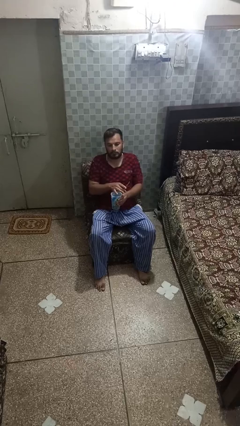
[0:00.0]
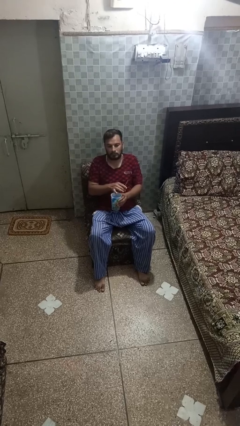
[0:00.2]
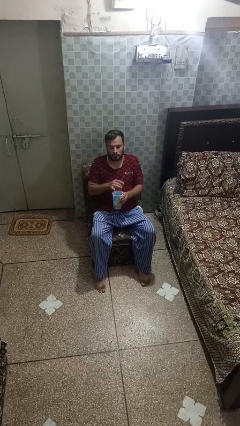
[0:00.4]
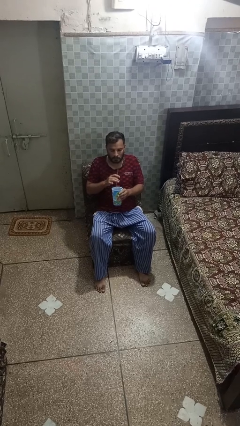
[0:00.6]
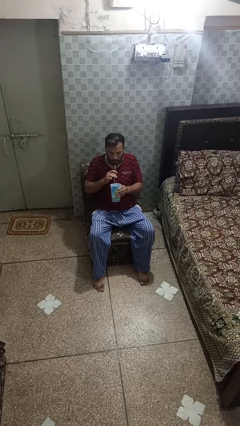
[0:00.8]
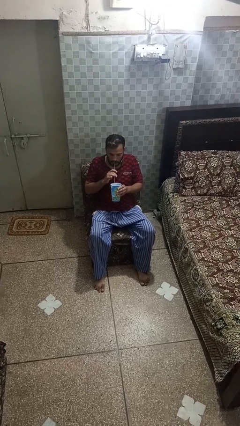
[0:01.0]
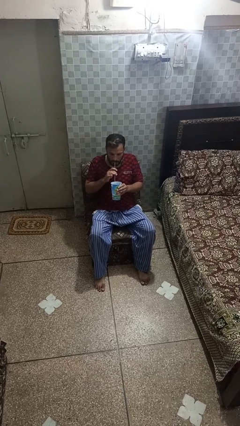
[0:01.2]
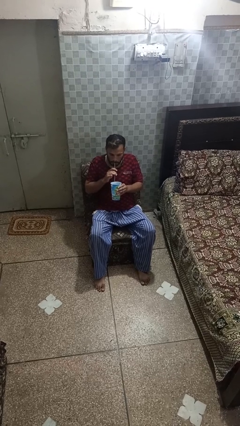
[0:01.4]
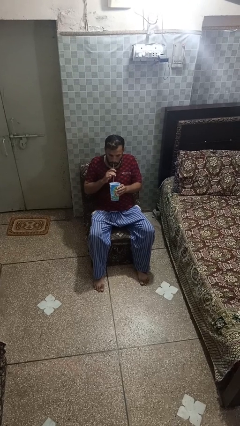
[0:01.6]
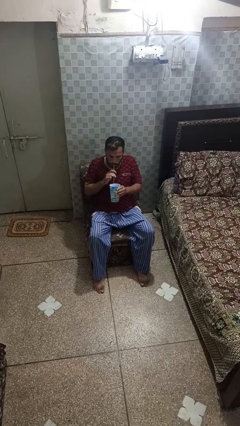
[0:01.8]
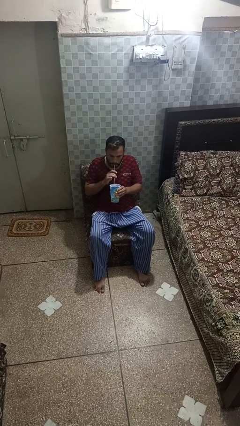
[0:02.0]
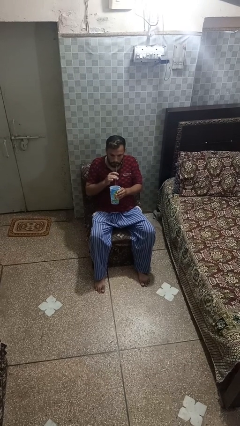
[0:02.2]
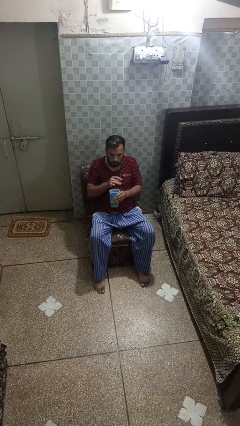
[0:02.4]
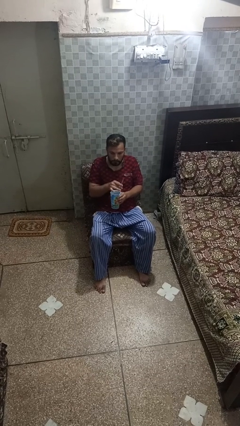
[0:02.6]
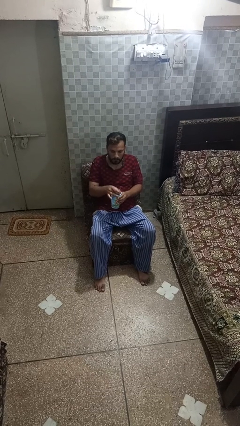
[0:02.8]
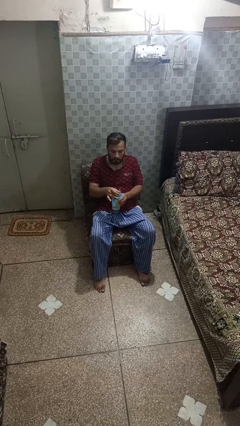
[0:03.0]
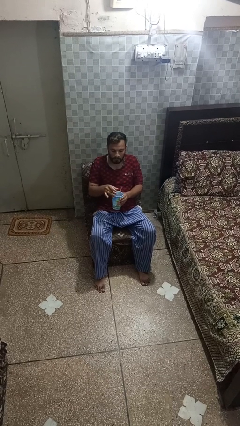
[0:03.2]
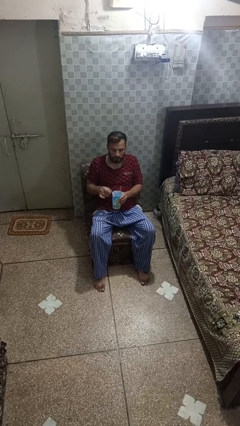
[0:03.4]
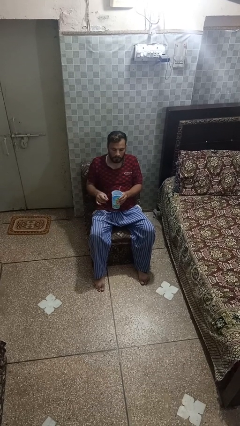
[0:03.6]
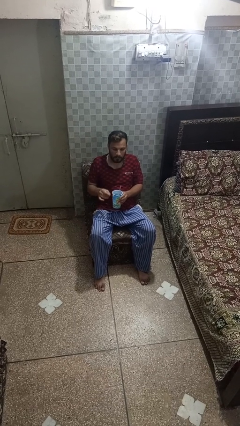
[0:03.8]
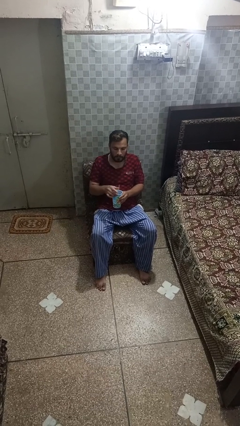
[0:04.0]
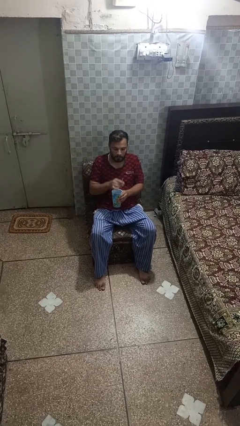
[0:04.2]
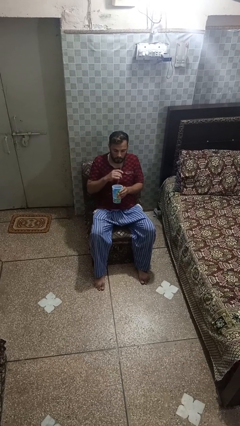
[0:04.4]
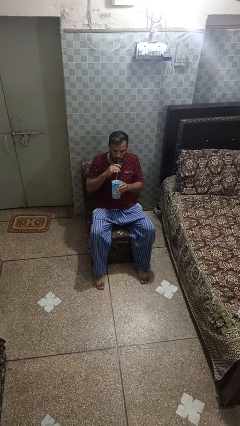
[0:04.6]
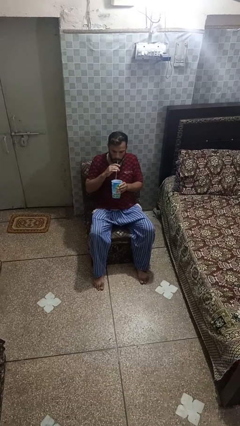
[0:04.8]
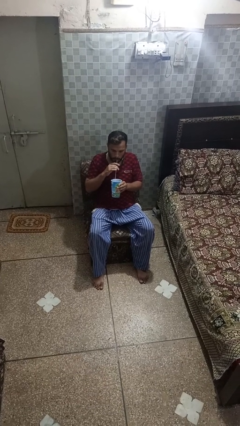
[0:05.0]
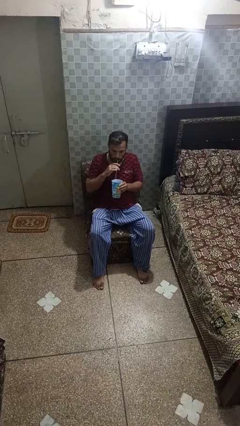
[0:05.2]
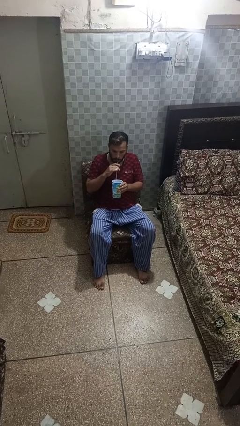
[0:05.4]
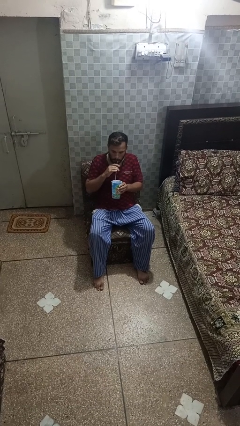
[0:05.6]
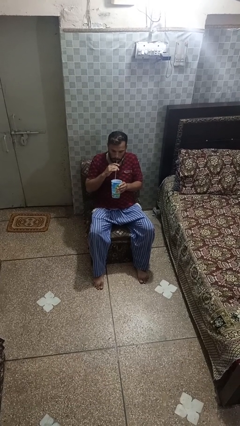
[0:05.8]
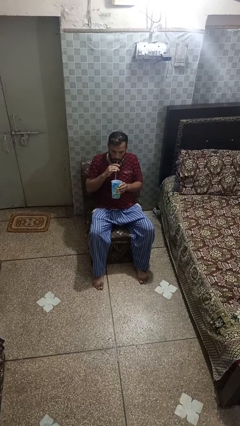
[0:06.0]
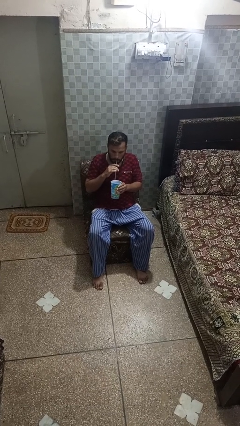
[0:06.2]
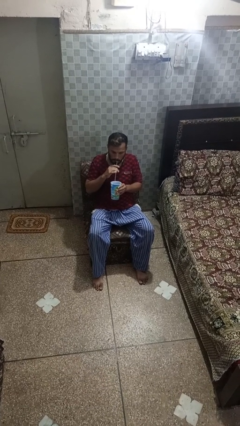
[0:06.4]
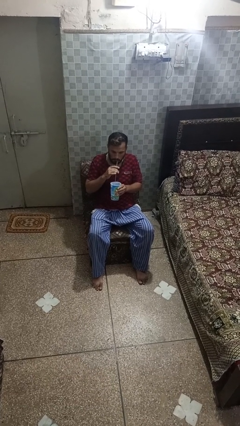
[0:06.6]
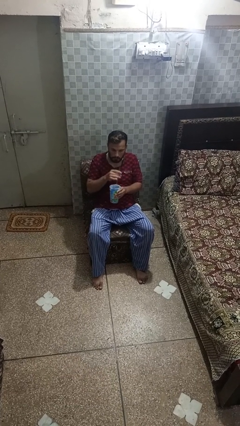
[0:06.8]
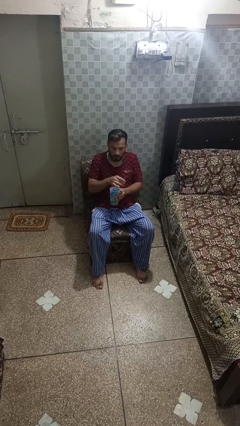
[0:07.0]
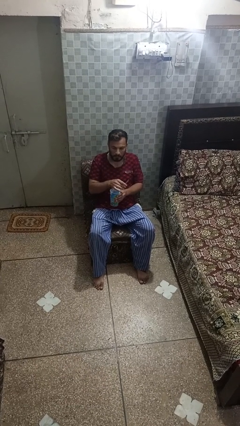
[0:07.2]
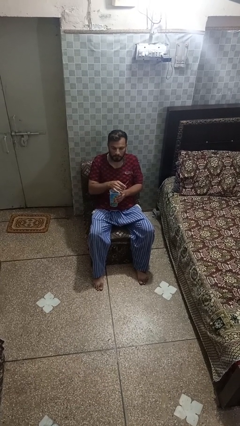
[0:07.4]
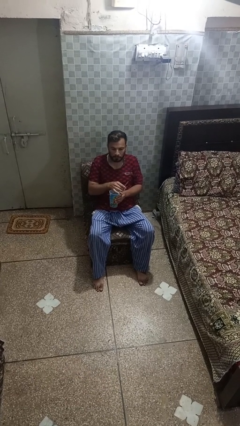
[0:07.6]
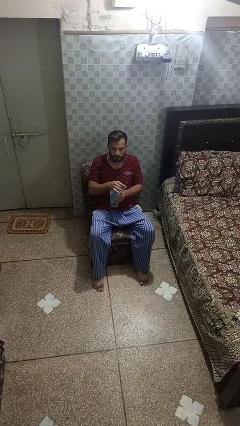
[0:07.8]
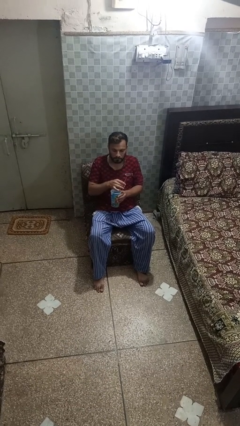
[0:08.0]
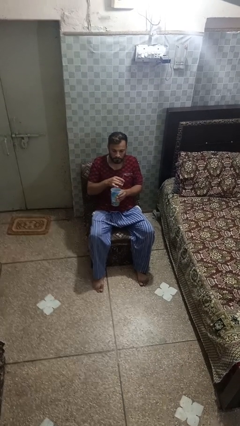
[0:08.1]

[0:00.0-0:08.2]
person drinks from straw

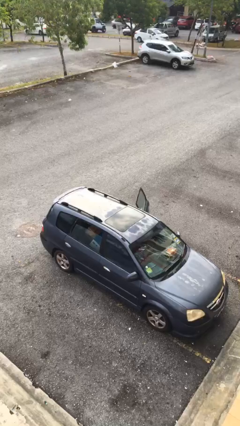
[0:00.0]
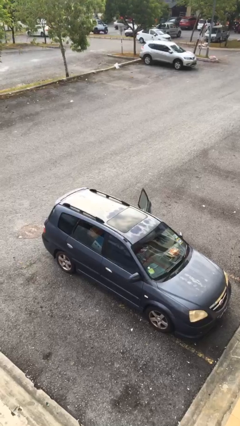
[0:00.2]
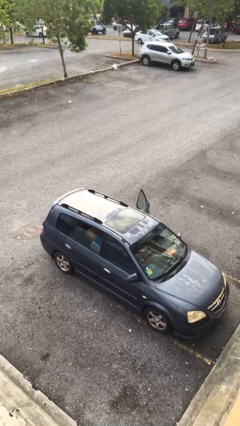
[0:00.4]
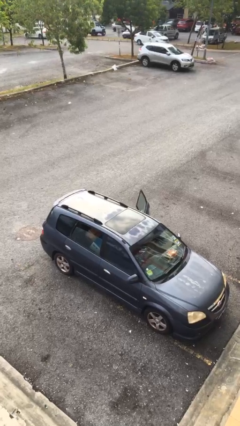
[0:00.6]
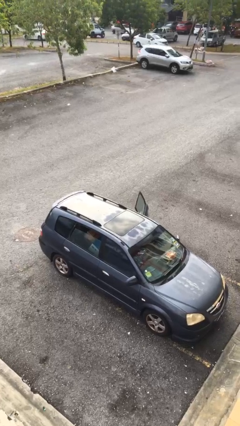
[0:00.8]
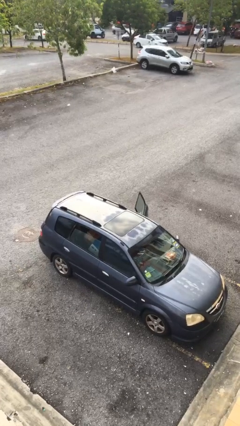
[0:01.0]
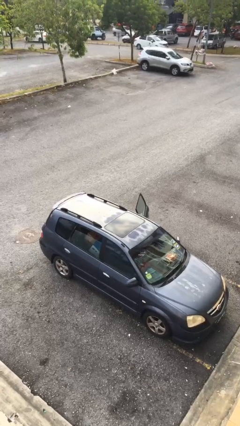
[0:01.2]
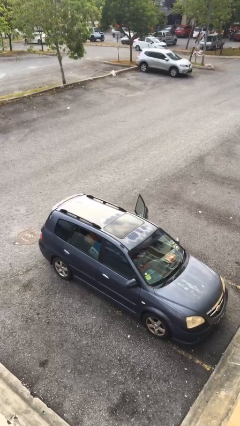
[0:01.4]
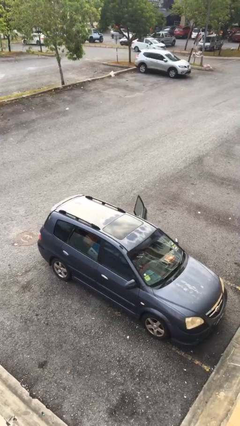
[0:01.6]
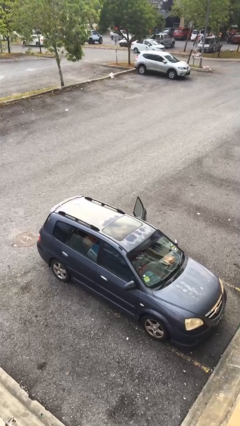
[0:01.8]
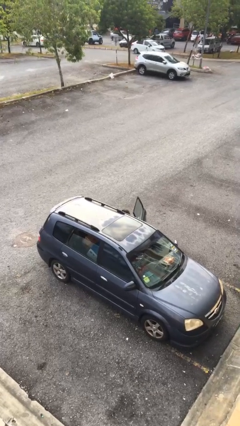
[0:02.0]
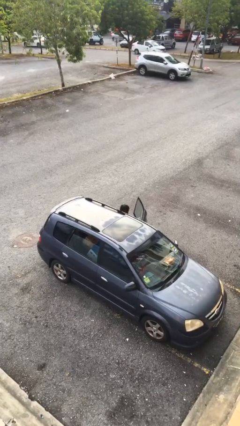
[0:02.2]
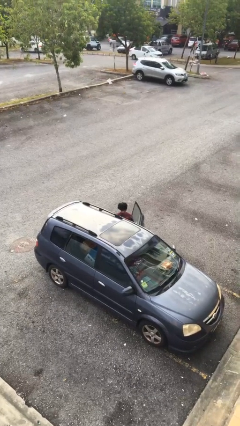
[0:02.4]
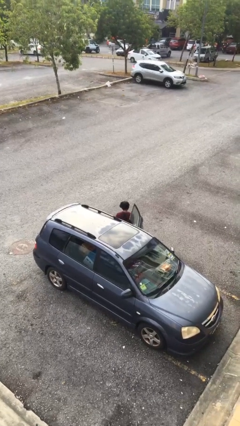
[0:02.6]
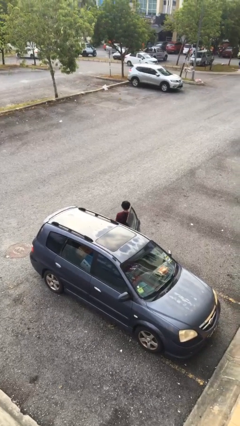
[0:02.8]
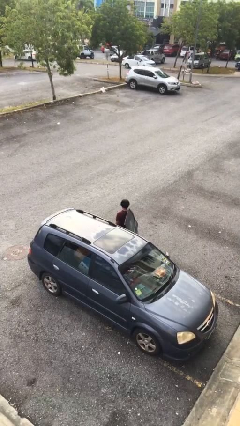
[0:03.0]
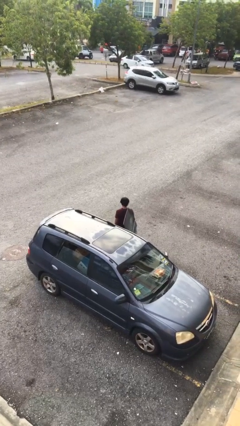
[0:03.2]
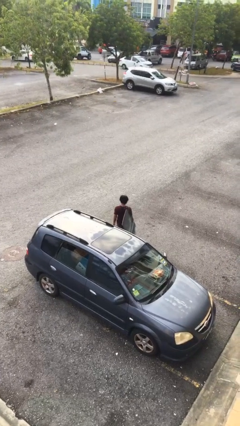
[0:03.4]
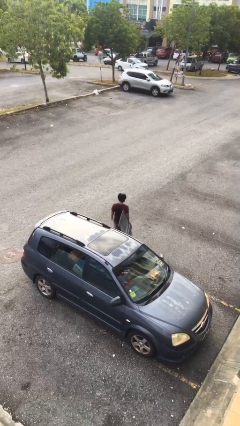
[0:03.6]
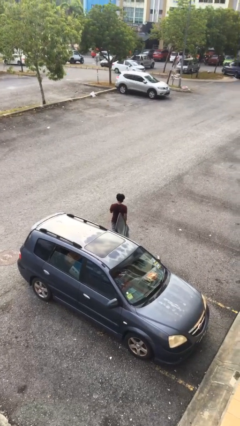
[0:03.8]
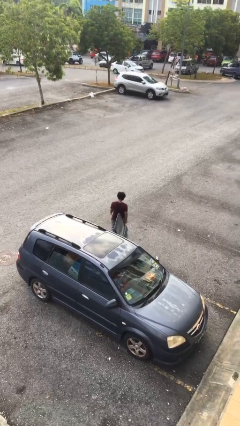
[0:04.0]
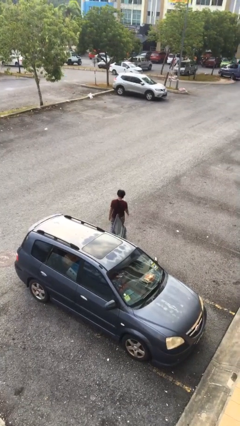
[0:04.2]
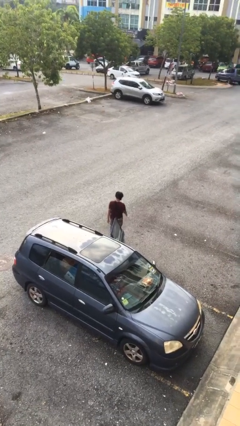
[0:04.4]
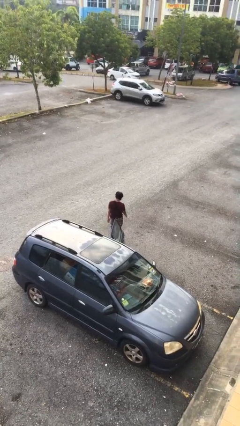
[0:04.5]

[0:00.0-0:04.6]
person exits car

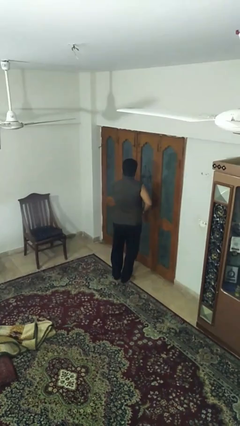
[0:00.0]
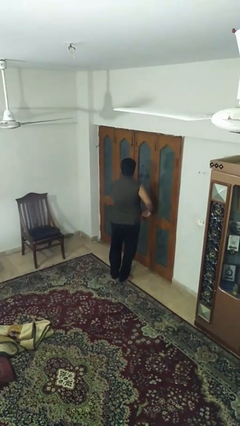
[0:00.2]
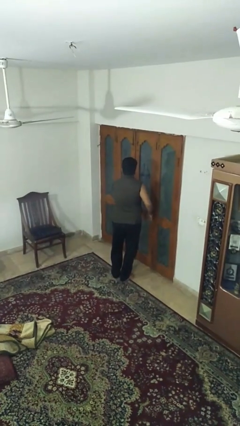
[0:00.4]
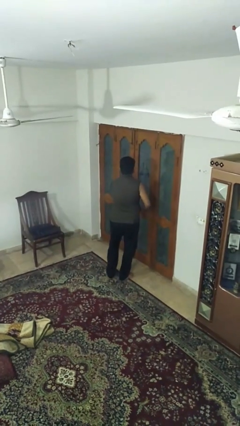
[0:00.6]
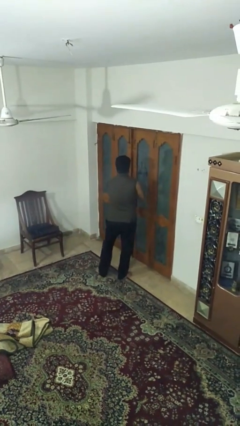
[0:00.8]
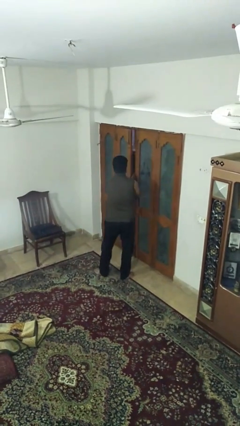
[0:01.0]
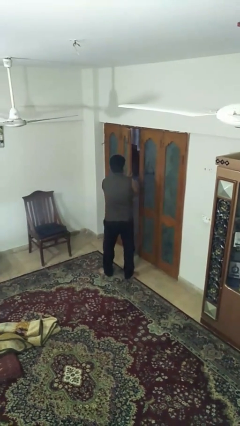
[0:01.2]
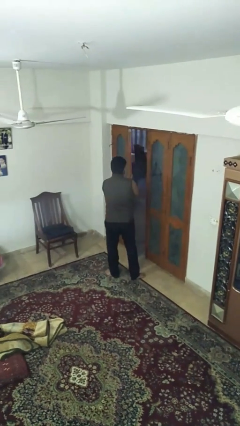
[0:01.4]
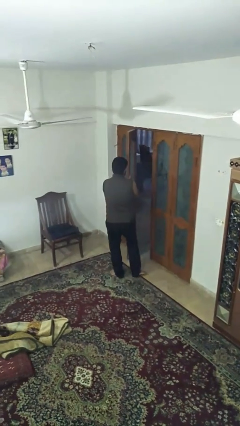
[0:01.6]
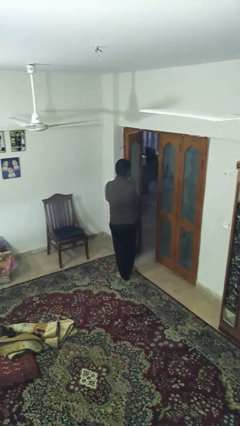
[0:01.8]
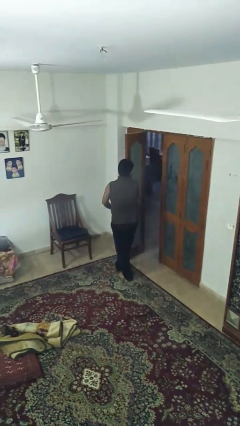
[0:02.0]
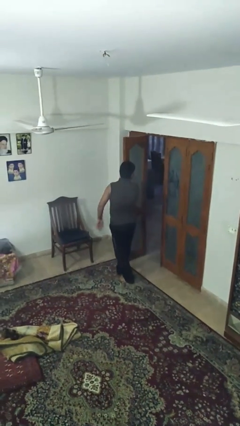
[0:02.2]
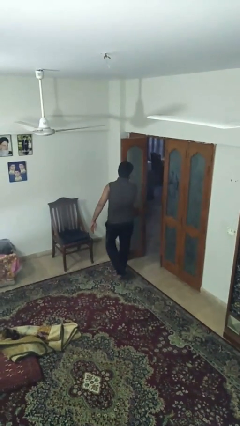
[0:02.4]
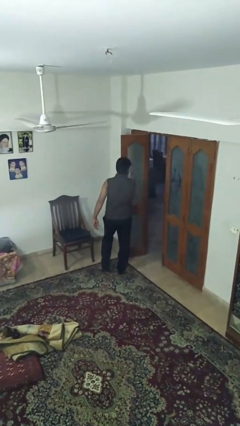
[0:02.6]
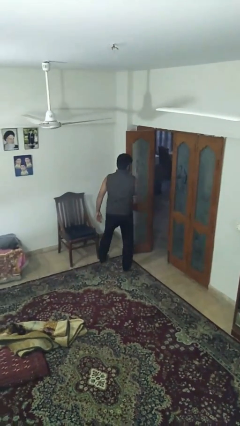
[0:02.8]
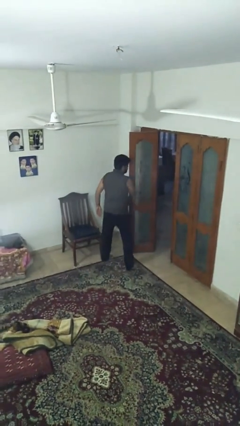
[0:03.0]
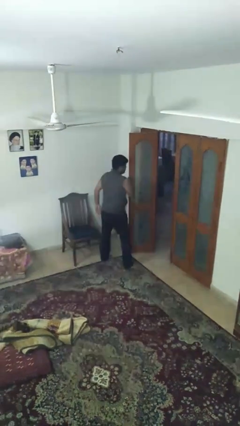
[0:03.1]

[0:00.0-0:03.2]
person opens facility door

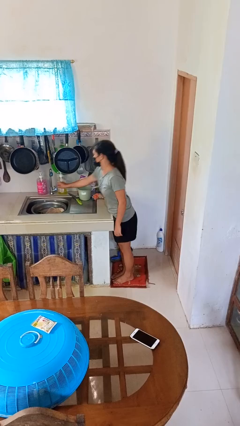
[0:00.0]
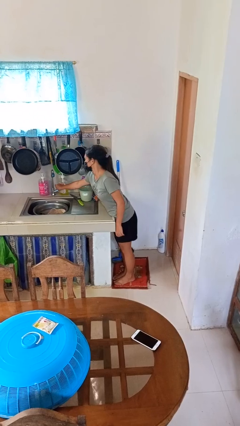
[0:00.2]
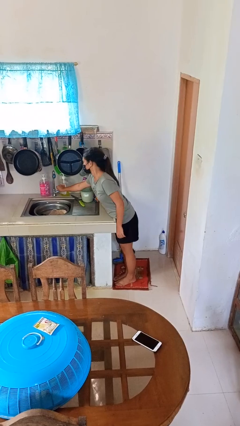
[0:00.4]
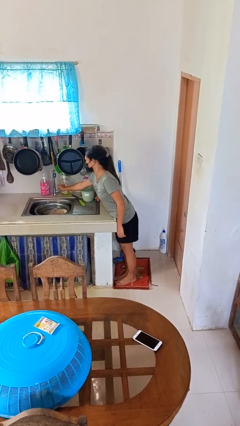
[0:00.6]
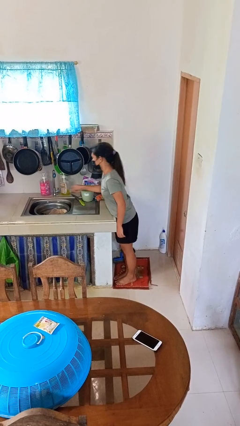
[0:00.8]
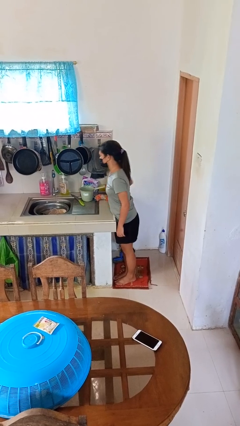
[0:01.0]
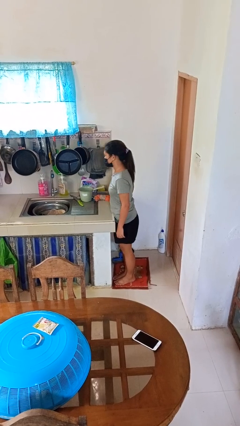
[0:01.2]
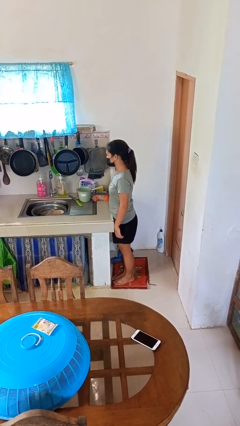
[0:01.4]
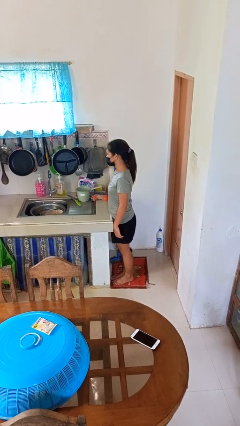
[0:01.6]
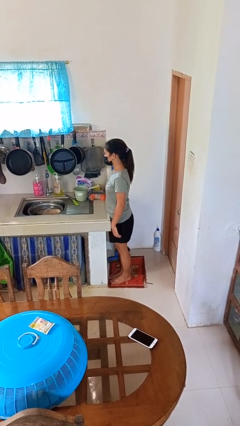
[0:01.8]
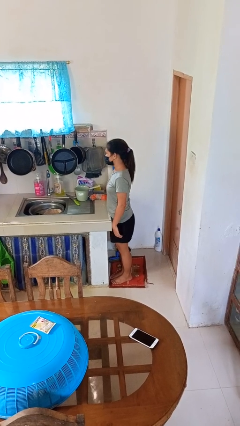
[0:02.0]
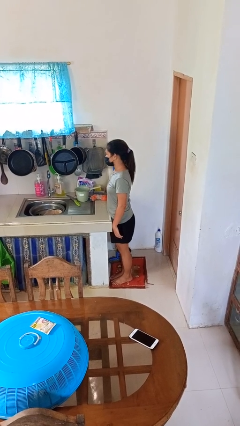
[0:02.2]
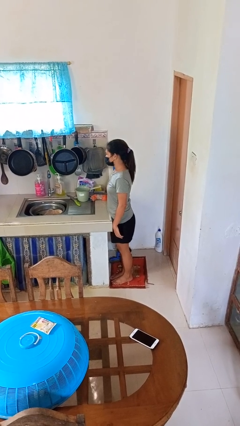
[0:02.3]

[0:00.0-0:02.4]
person turns on faucet
